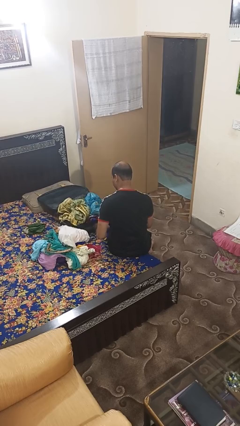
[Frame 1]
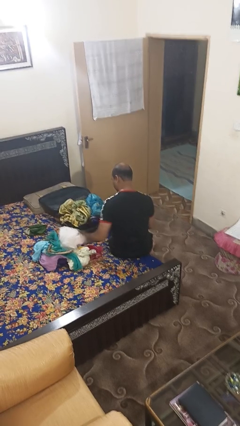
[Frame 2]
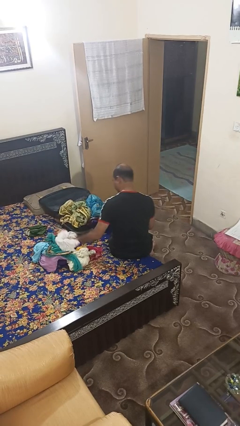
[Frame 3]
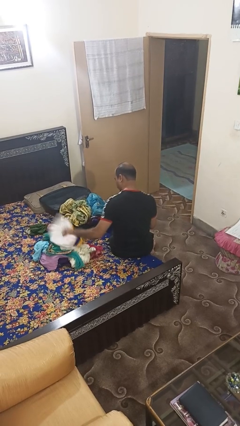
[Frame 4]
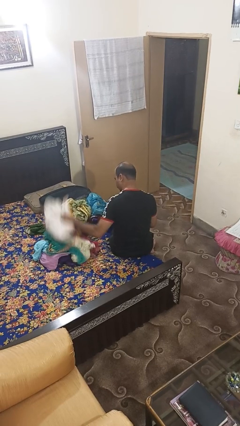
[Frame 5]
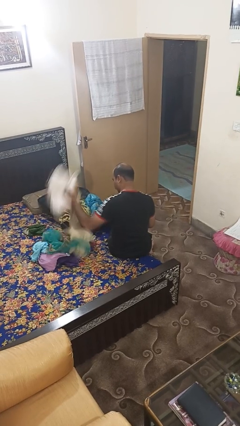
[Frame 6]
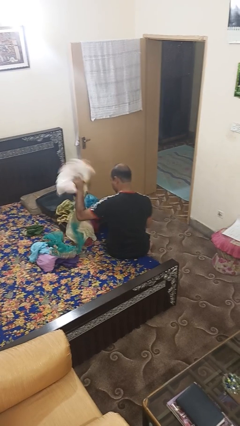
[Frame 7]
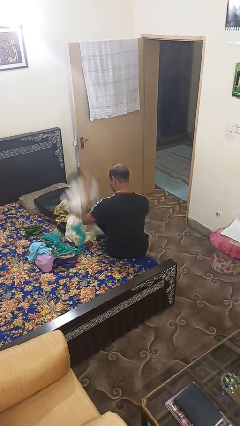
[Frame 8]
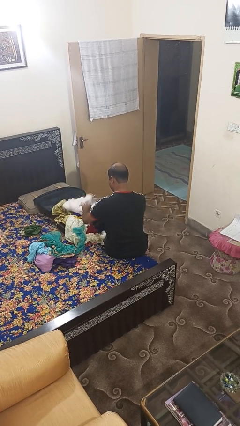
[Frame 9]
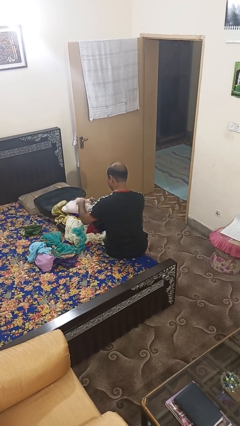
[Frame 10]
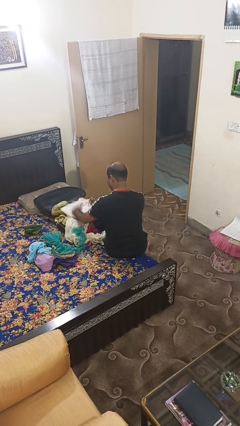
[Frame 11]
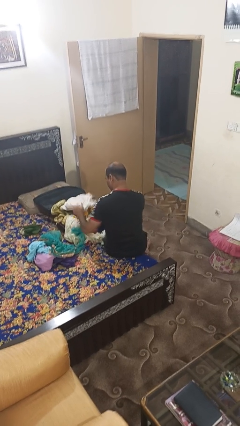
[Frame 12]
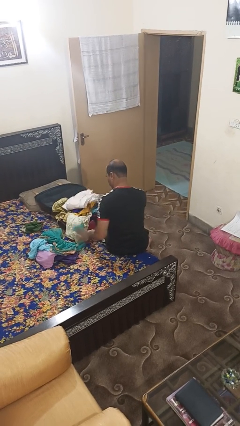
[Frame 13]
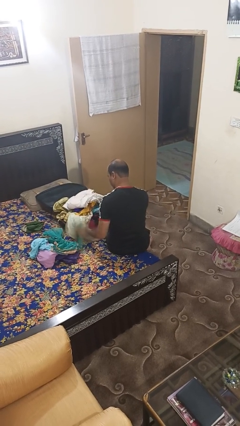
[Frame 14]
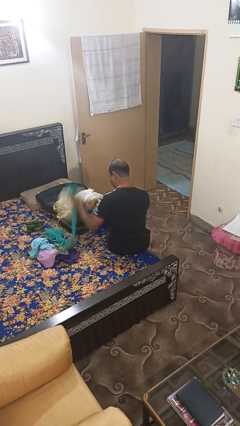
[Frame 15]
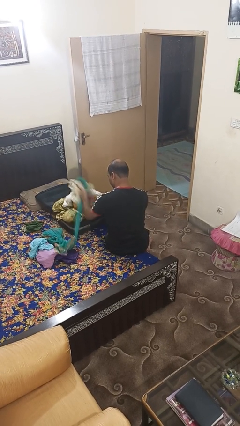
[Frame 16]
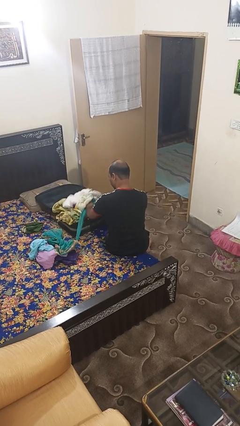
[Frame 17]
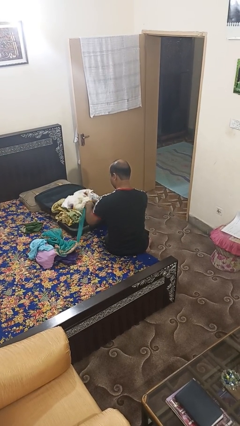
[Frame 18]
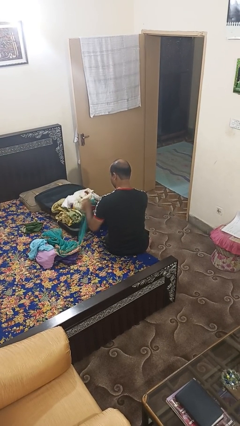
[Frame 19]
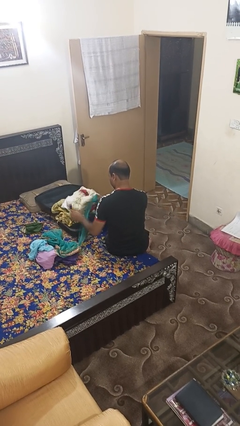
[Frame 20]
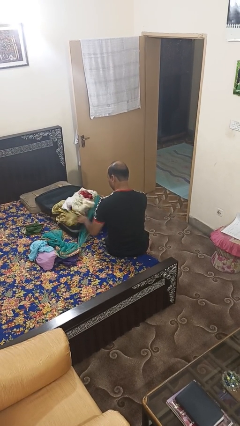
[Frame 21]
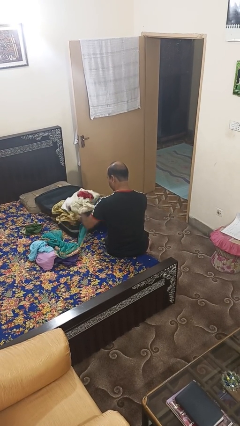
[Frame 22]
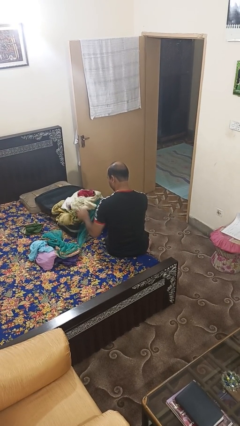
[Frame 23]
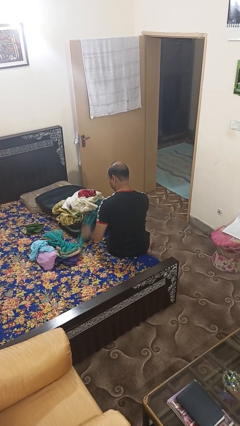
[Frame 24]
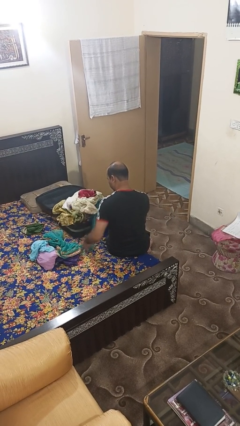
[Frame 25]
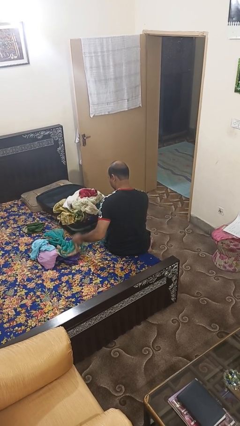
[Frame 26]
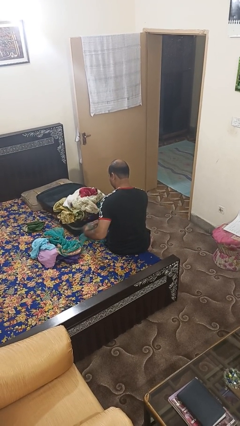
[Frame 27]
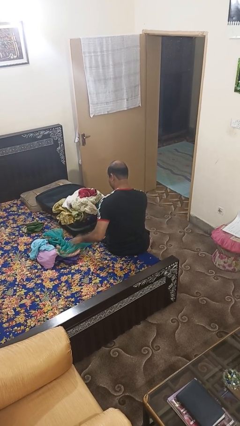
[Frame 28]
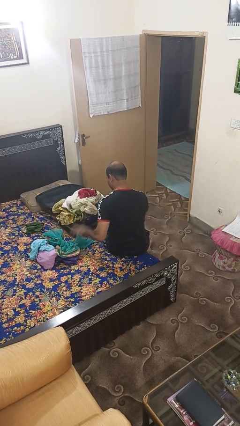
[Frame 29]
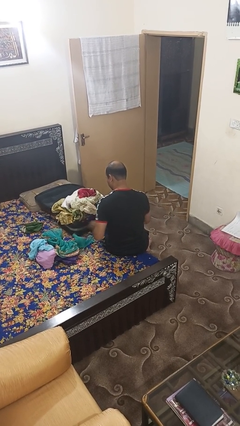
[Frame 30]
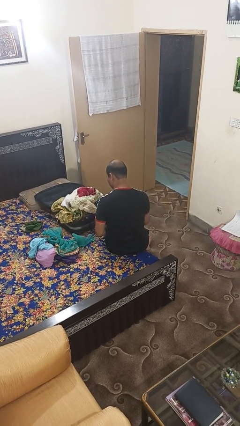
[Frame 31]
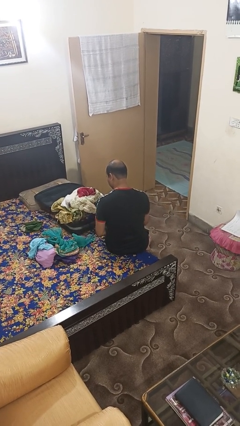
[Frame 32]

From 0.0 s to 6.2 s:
person loads clothes into suitcase

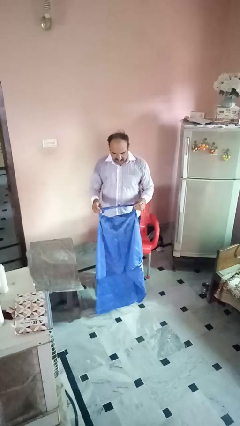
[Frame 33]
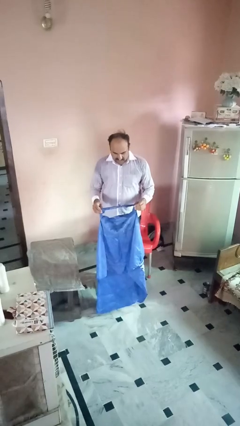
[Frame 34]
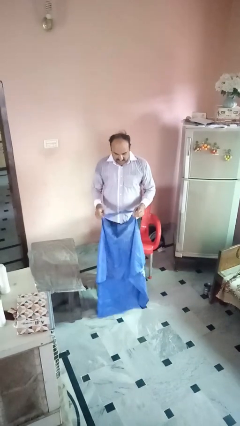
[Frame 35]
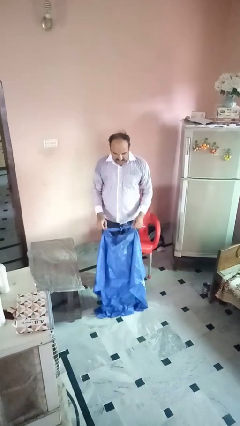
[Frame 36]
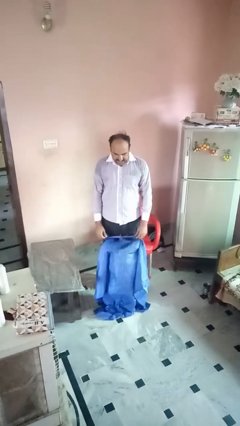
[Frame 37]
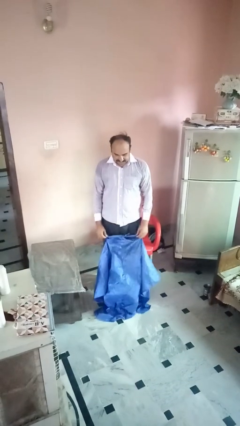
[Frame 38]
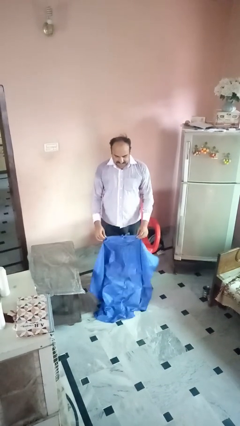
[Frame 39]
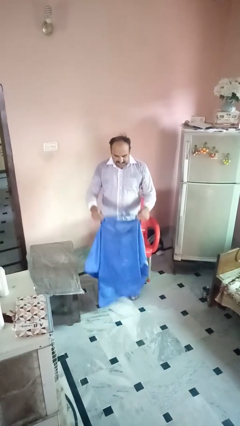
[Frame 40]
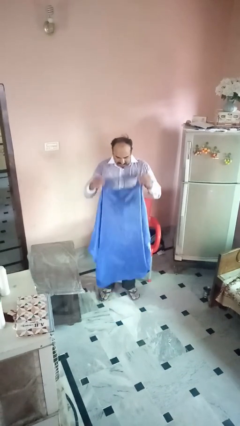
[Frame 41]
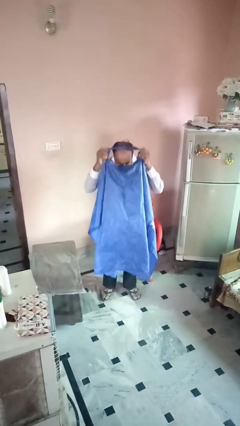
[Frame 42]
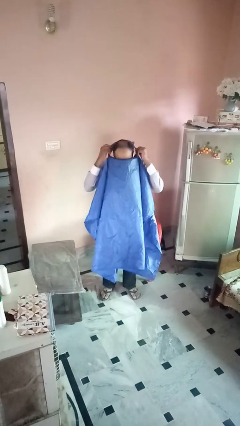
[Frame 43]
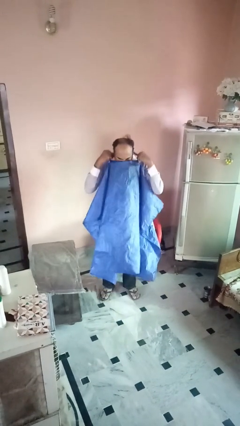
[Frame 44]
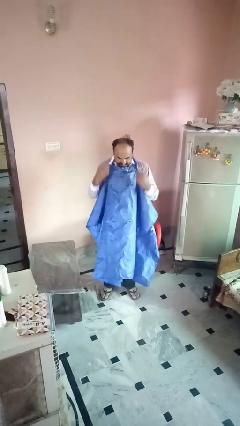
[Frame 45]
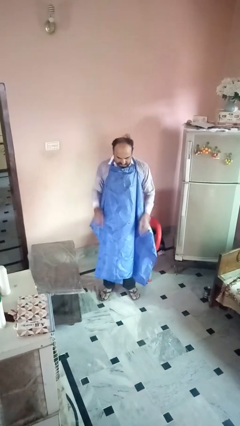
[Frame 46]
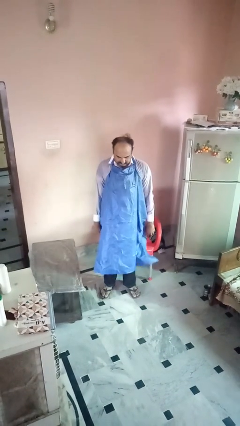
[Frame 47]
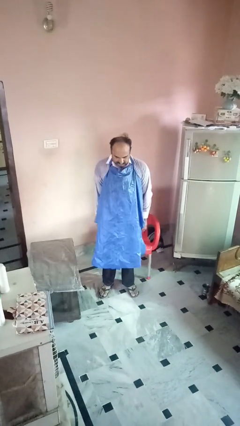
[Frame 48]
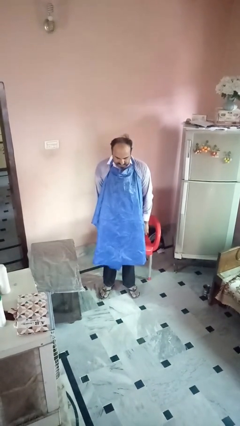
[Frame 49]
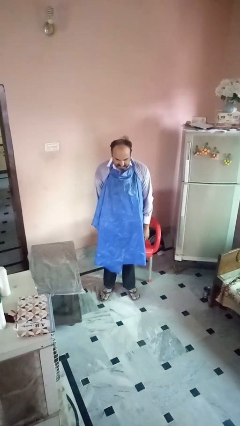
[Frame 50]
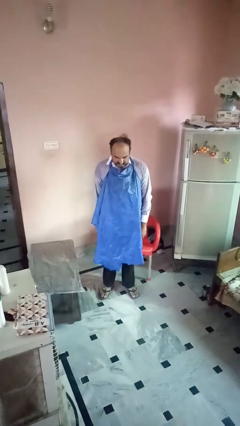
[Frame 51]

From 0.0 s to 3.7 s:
person puts on apron

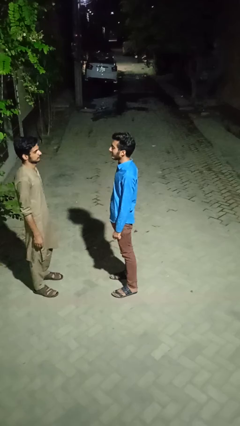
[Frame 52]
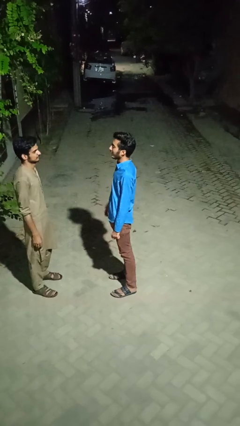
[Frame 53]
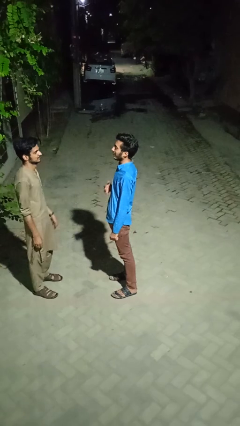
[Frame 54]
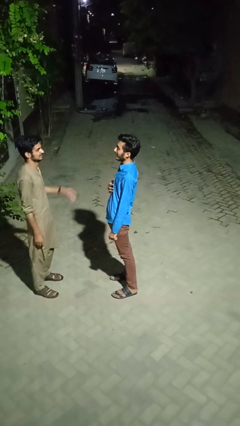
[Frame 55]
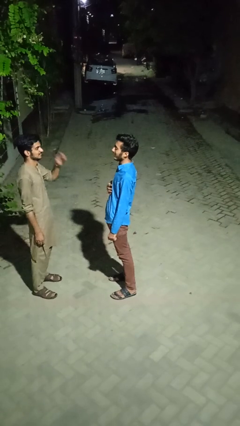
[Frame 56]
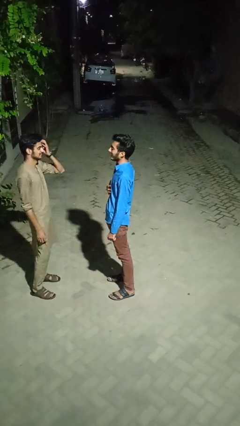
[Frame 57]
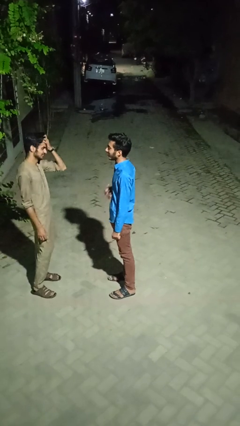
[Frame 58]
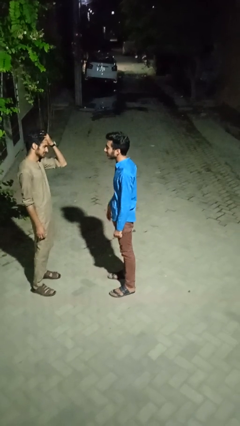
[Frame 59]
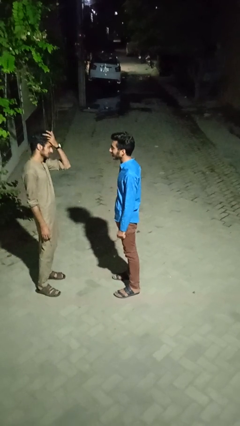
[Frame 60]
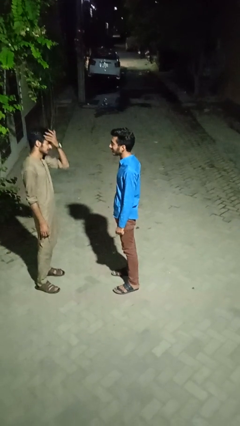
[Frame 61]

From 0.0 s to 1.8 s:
person laughs with person

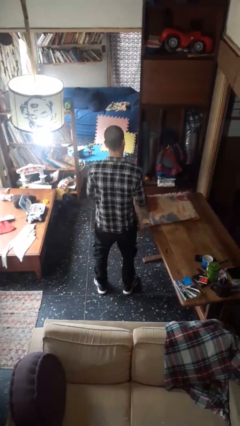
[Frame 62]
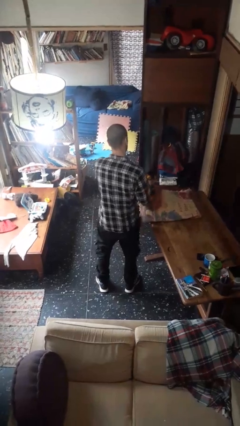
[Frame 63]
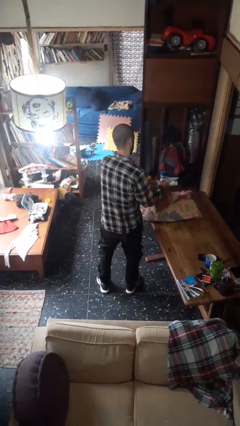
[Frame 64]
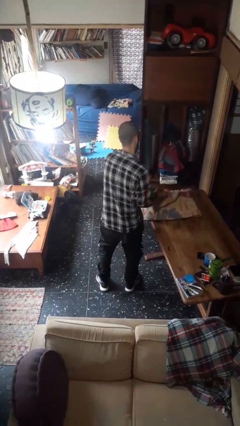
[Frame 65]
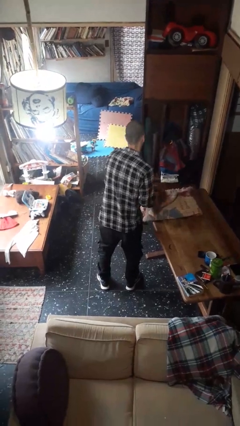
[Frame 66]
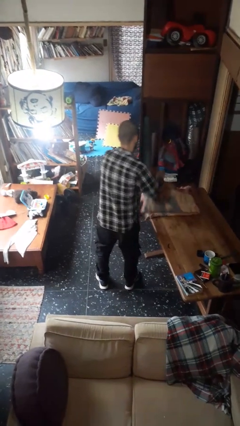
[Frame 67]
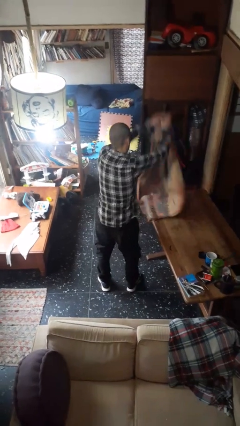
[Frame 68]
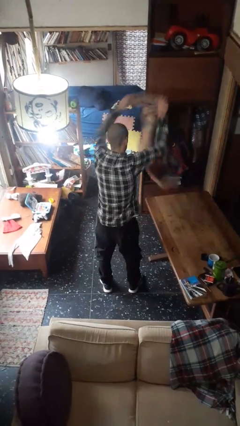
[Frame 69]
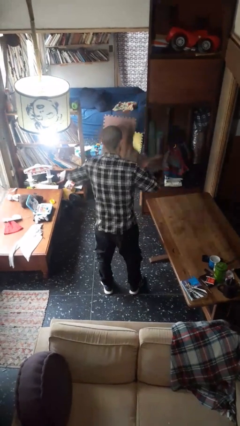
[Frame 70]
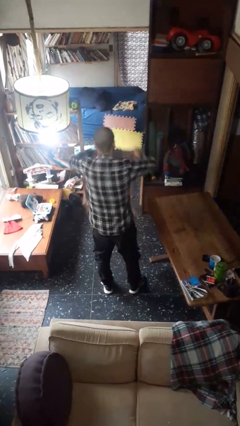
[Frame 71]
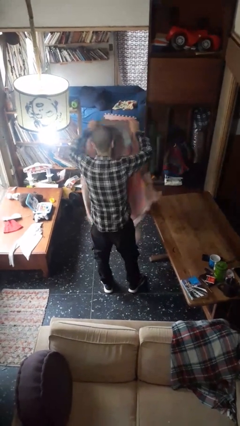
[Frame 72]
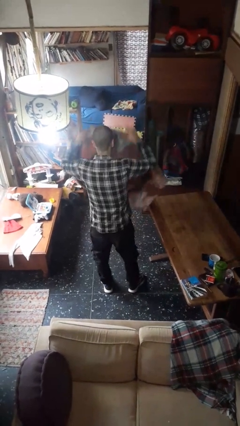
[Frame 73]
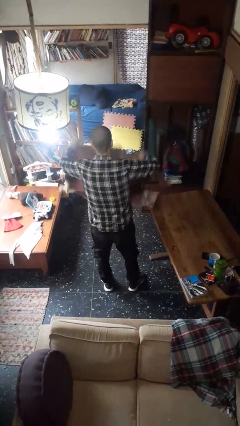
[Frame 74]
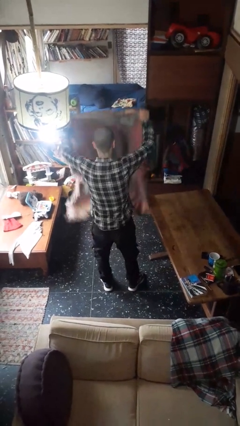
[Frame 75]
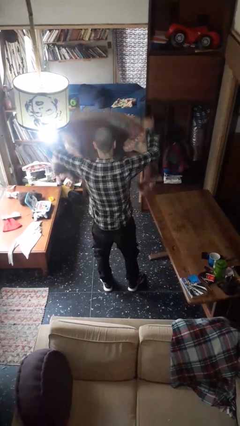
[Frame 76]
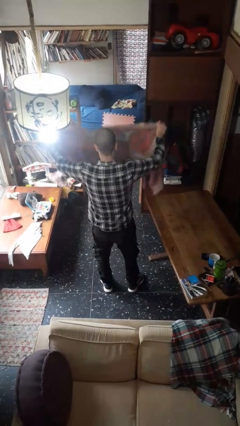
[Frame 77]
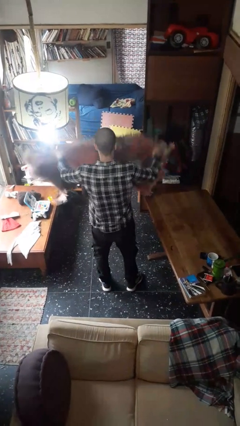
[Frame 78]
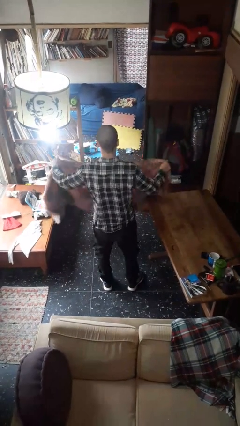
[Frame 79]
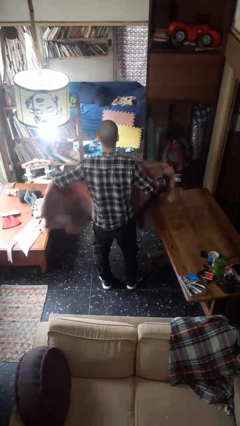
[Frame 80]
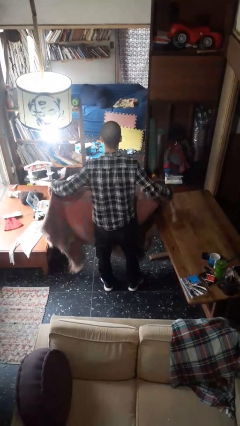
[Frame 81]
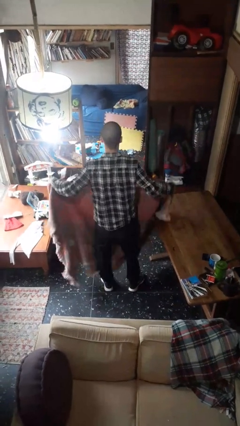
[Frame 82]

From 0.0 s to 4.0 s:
person unfolds blanket

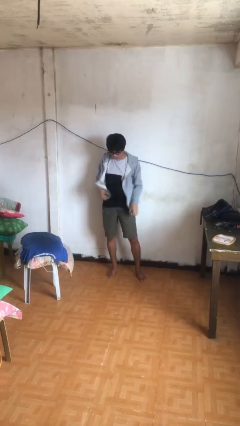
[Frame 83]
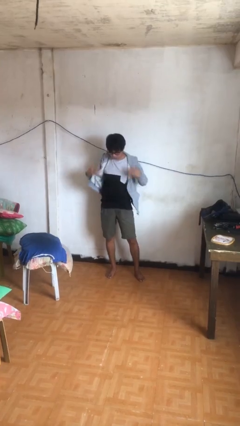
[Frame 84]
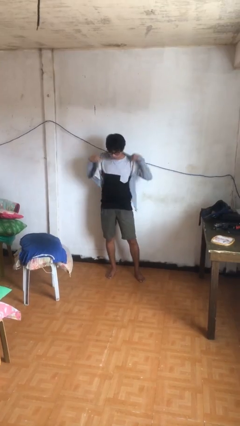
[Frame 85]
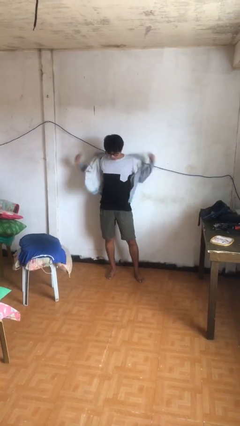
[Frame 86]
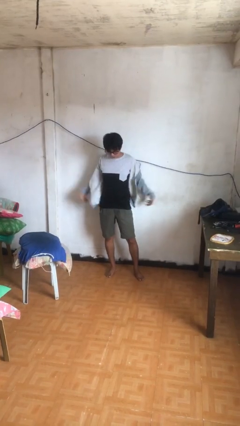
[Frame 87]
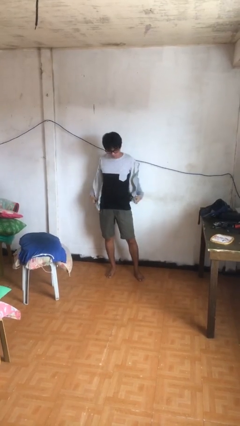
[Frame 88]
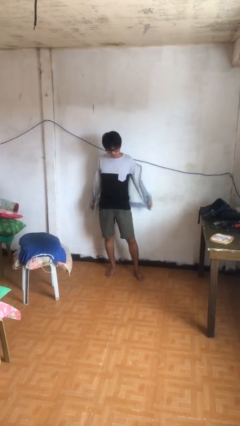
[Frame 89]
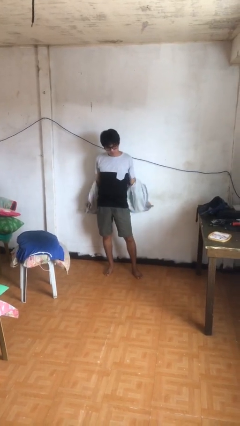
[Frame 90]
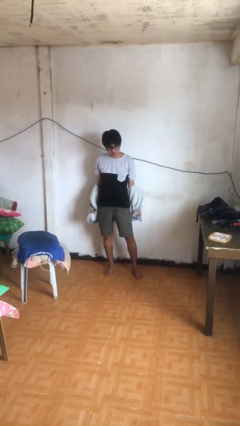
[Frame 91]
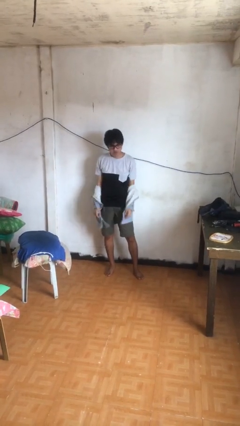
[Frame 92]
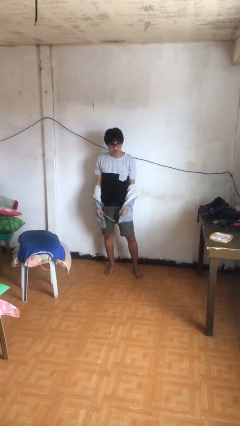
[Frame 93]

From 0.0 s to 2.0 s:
person takes off jacket

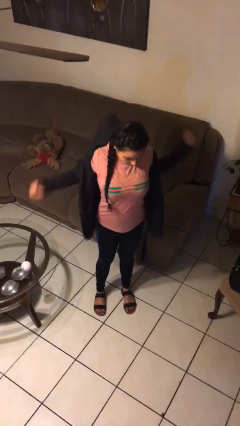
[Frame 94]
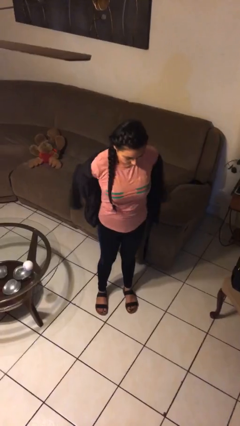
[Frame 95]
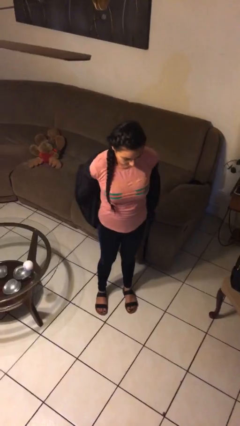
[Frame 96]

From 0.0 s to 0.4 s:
person takes off hoodie
